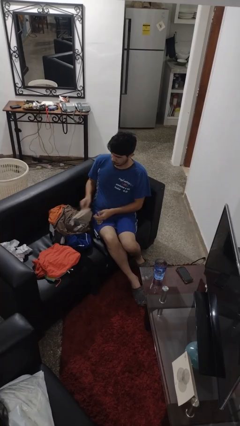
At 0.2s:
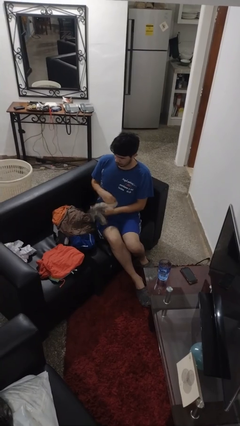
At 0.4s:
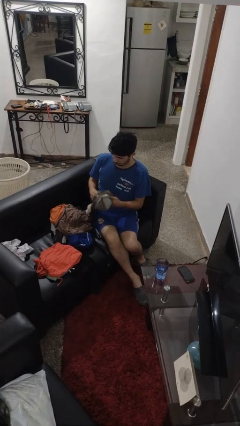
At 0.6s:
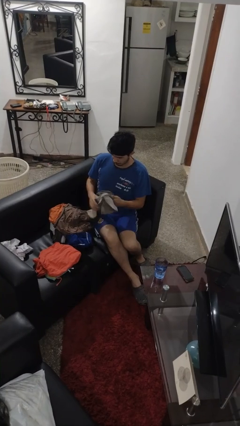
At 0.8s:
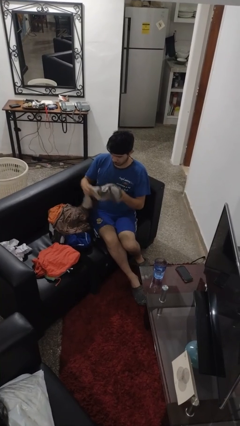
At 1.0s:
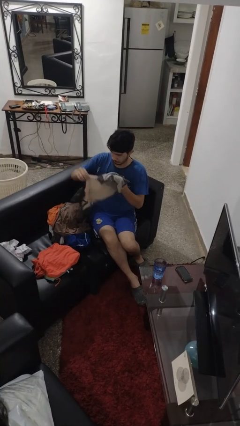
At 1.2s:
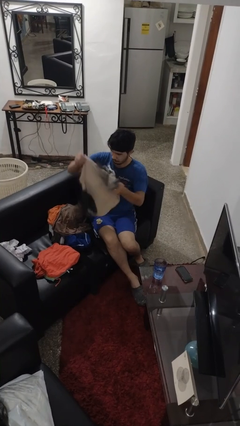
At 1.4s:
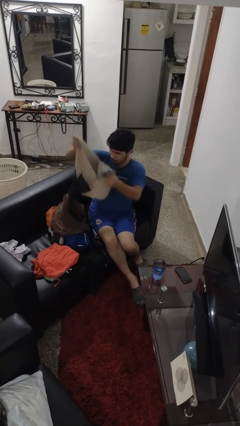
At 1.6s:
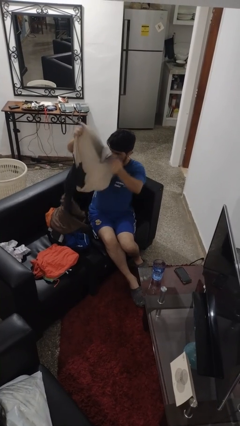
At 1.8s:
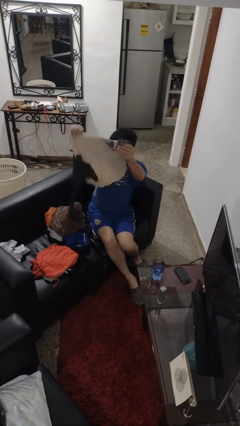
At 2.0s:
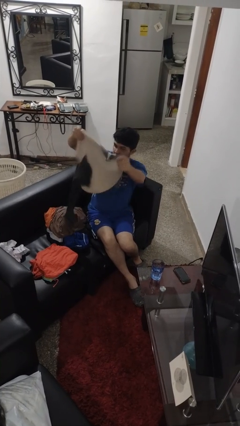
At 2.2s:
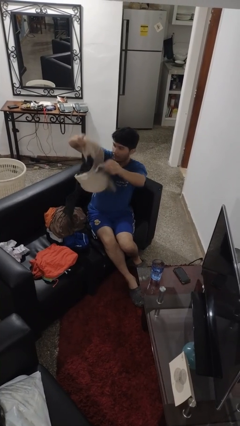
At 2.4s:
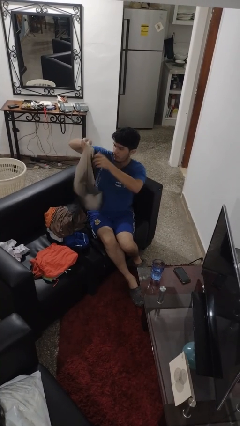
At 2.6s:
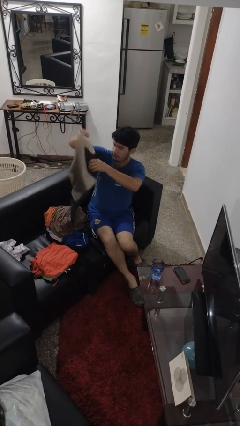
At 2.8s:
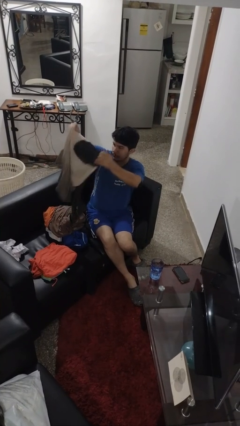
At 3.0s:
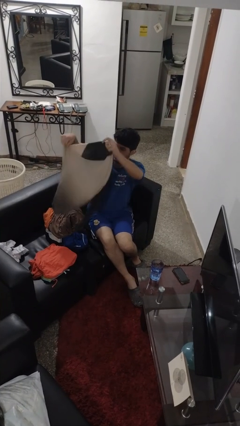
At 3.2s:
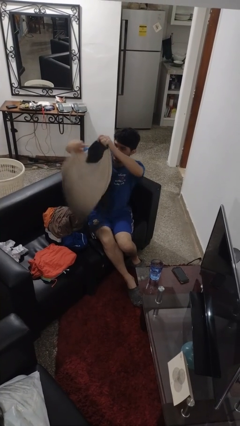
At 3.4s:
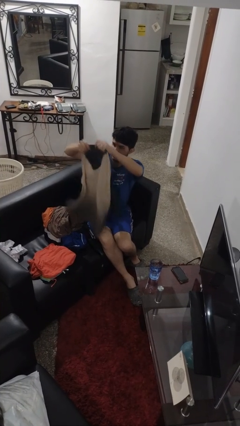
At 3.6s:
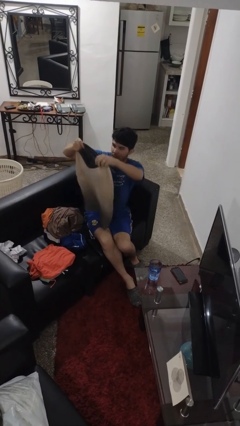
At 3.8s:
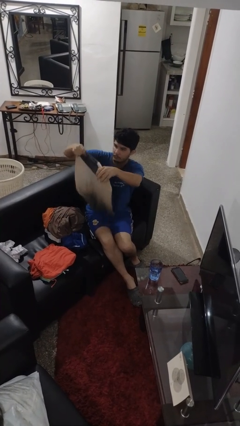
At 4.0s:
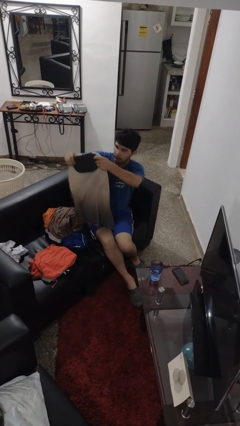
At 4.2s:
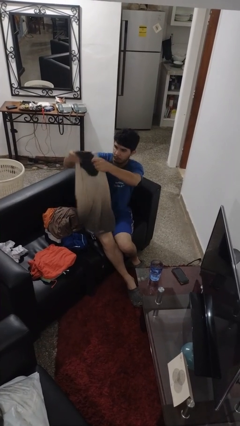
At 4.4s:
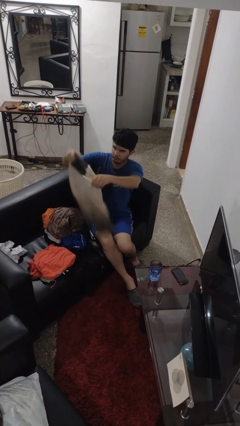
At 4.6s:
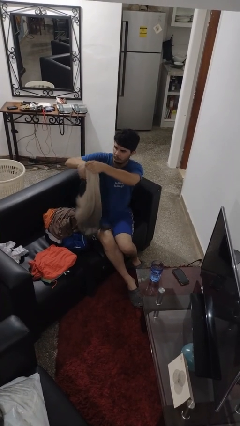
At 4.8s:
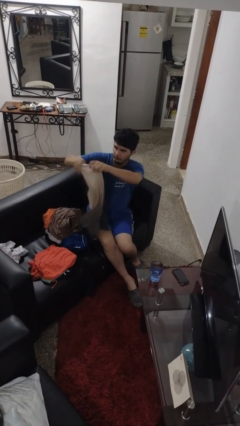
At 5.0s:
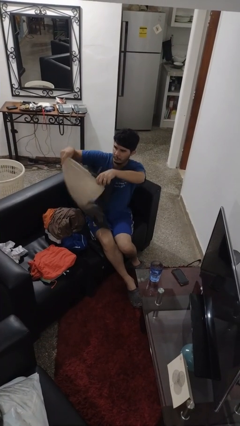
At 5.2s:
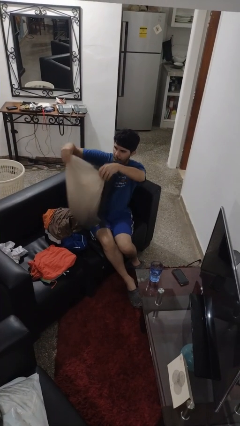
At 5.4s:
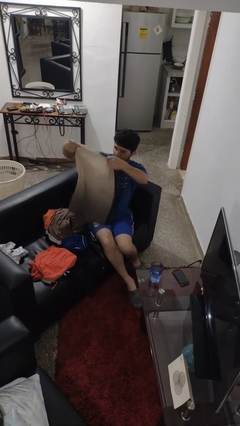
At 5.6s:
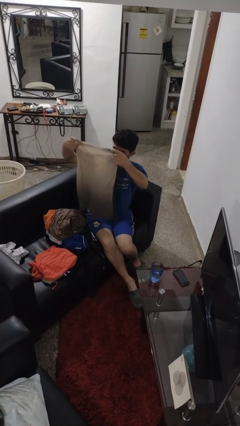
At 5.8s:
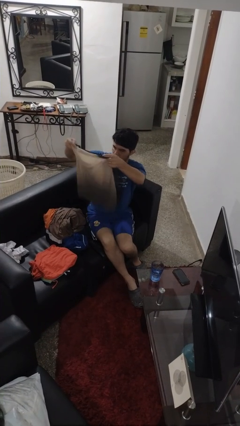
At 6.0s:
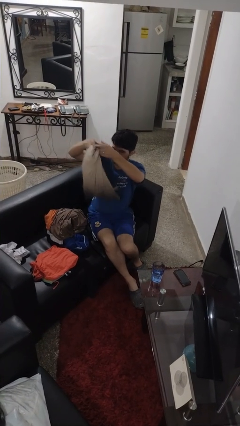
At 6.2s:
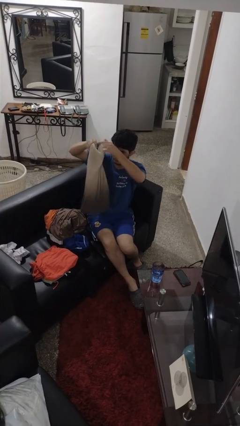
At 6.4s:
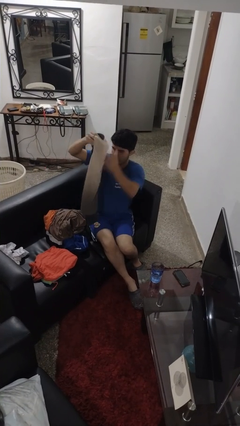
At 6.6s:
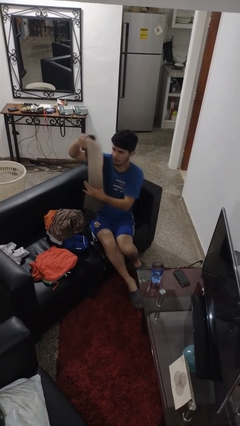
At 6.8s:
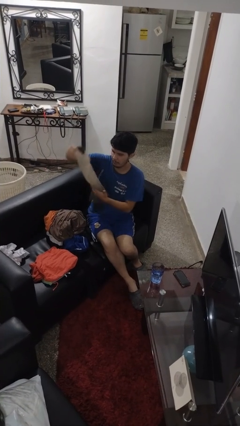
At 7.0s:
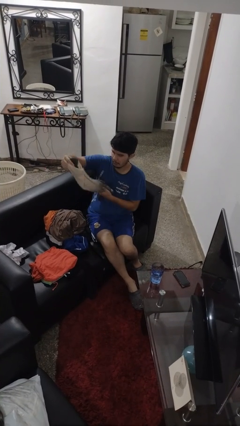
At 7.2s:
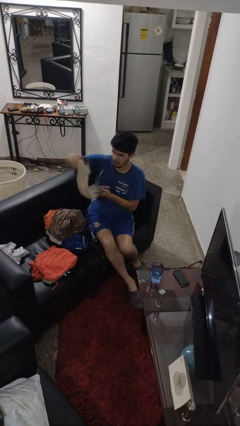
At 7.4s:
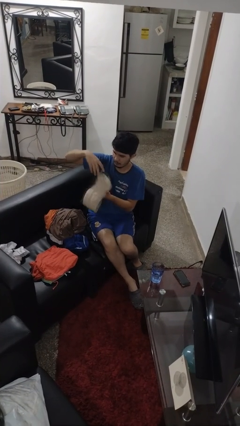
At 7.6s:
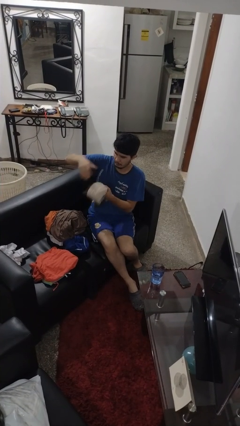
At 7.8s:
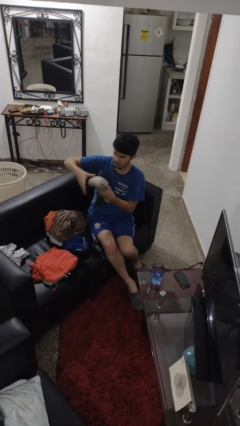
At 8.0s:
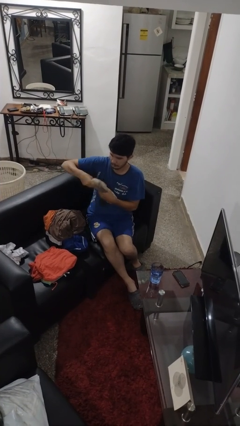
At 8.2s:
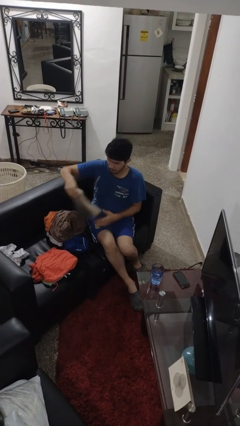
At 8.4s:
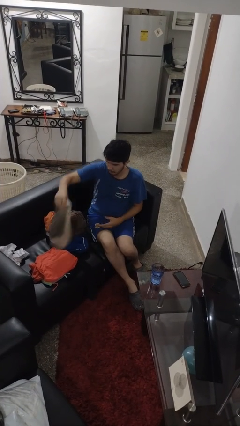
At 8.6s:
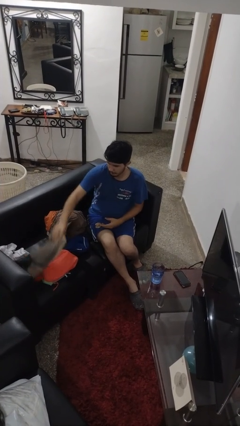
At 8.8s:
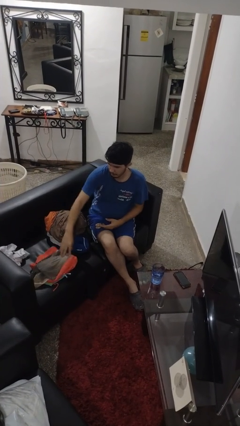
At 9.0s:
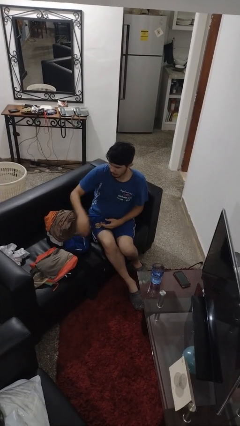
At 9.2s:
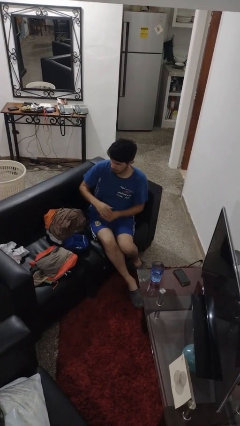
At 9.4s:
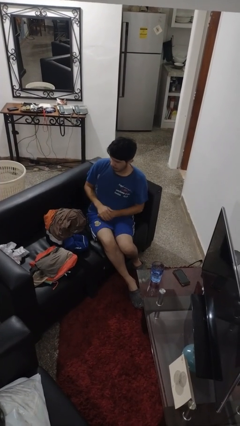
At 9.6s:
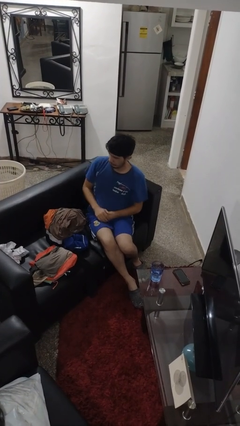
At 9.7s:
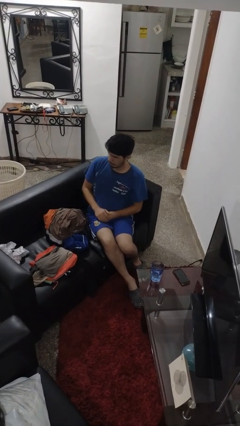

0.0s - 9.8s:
person folds shirt

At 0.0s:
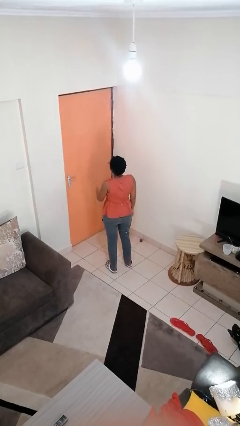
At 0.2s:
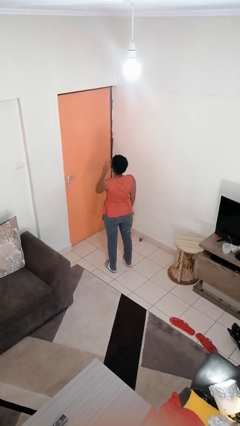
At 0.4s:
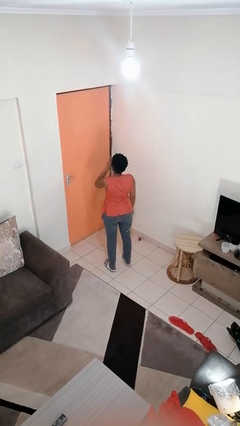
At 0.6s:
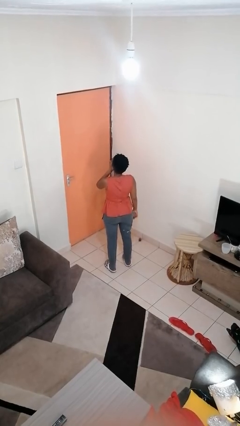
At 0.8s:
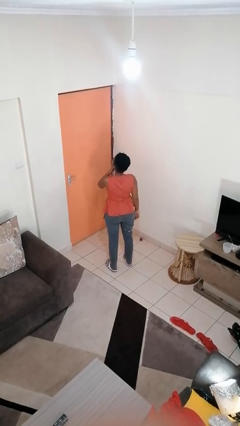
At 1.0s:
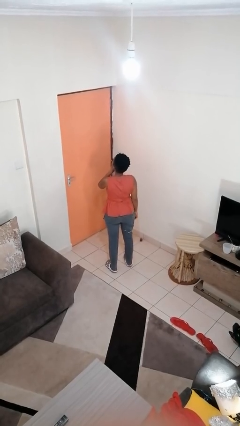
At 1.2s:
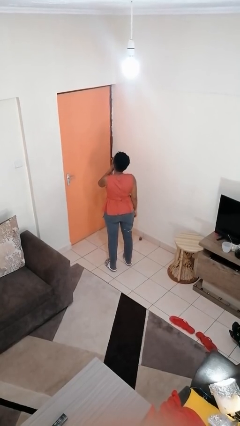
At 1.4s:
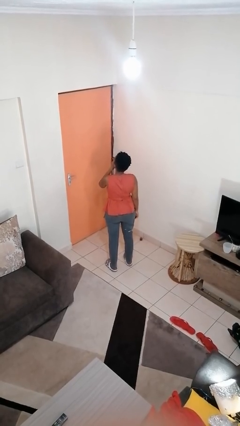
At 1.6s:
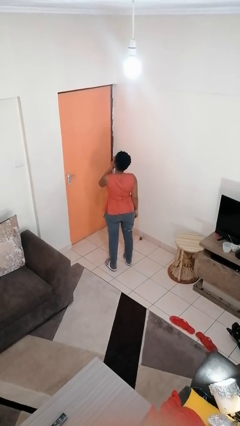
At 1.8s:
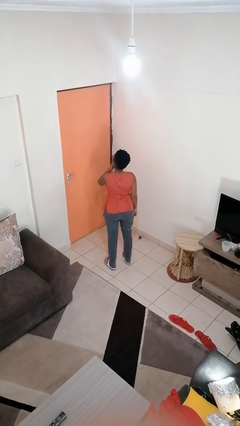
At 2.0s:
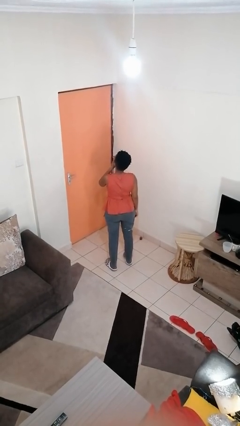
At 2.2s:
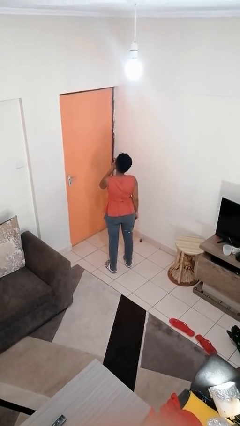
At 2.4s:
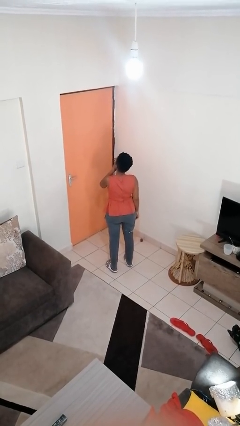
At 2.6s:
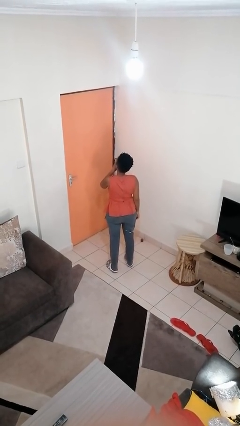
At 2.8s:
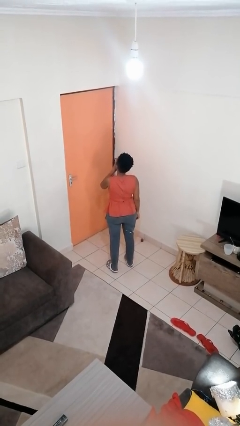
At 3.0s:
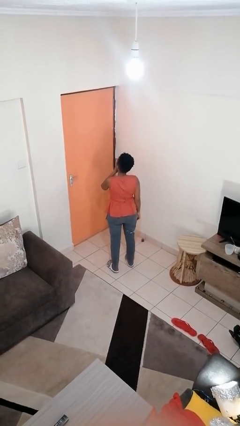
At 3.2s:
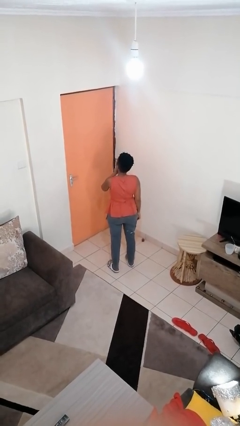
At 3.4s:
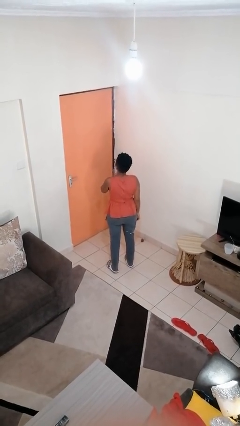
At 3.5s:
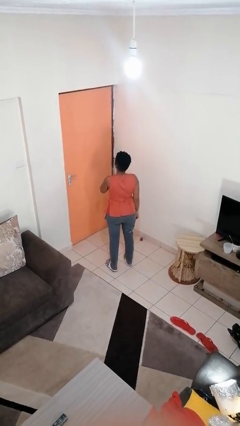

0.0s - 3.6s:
person gestures be quiet

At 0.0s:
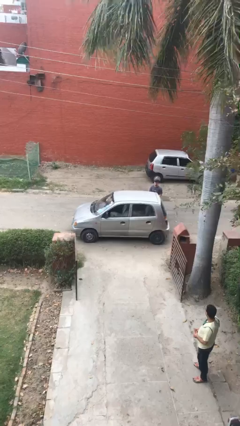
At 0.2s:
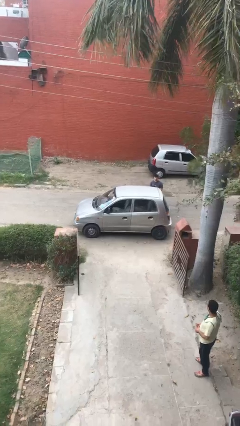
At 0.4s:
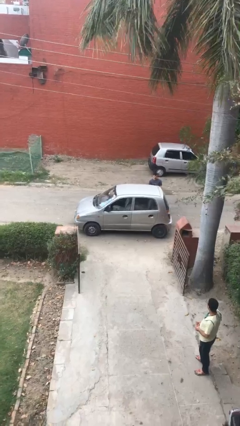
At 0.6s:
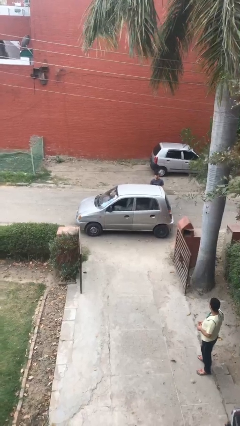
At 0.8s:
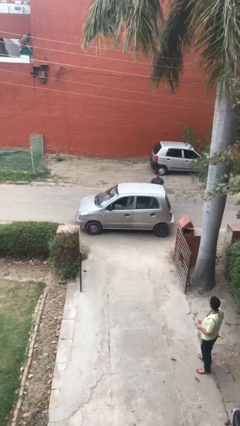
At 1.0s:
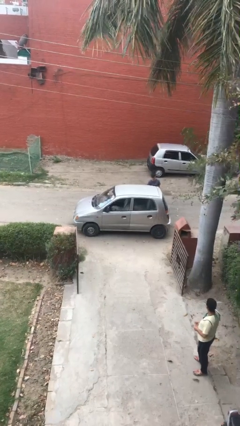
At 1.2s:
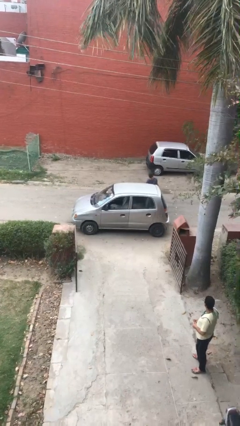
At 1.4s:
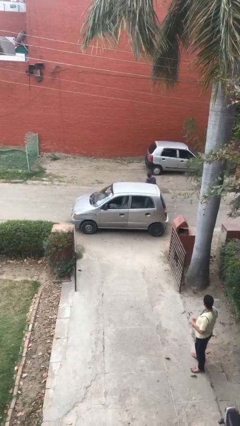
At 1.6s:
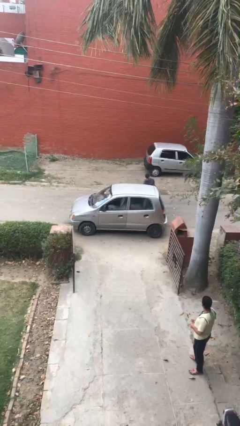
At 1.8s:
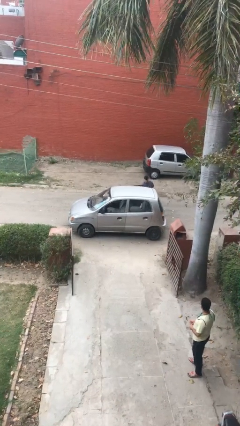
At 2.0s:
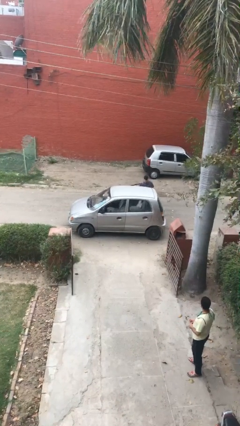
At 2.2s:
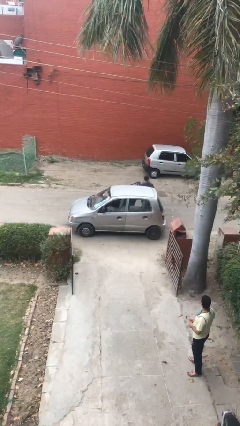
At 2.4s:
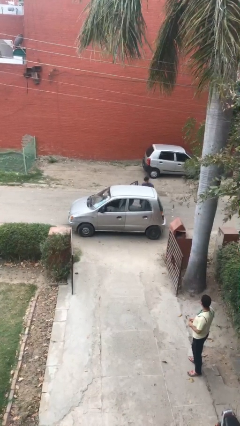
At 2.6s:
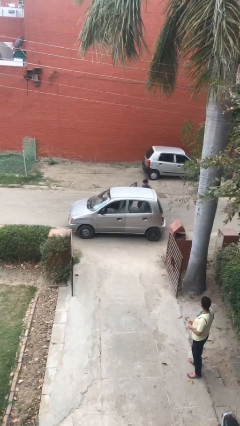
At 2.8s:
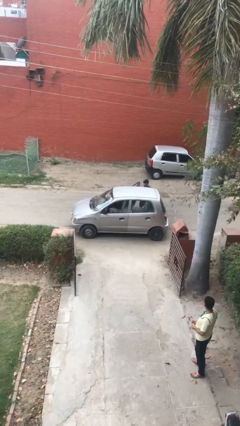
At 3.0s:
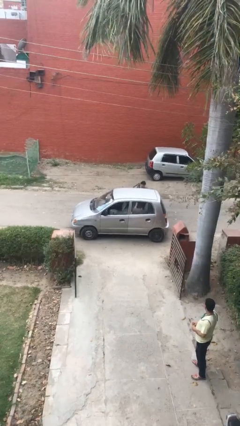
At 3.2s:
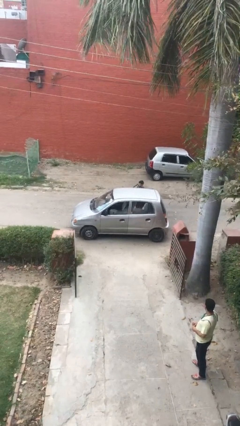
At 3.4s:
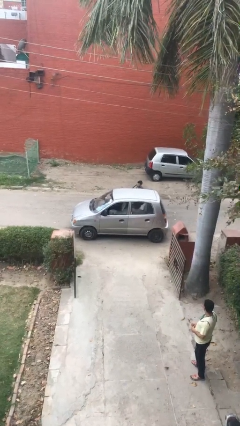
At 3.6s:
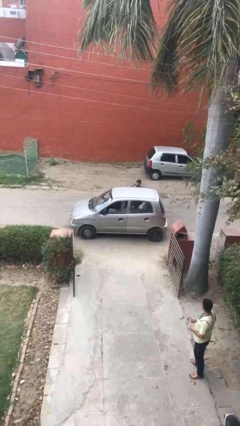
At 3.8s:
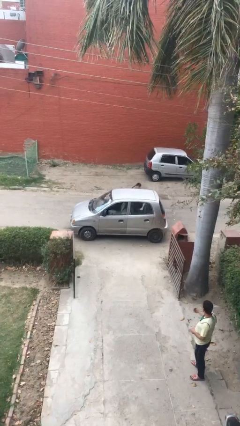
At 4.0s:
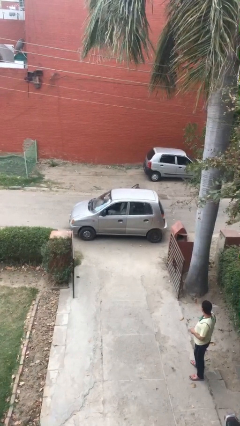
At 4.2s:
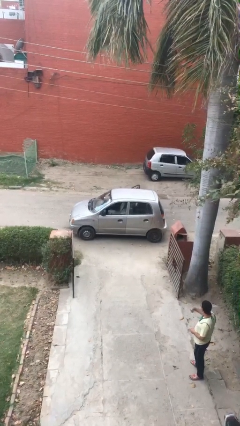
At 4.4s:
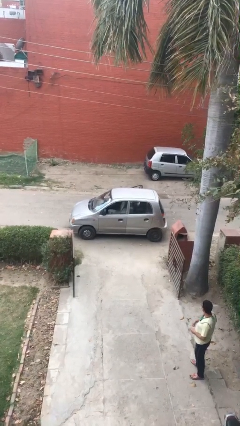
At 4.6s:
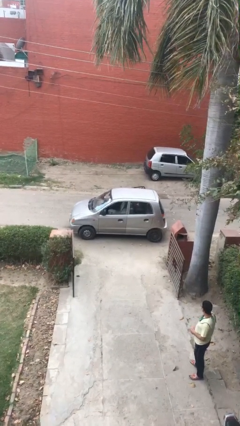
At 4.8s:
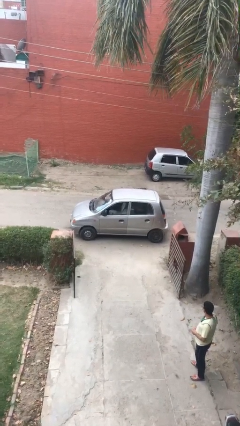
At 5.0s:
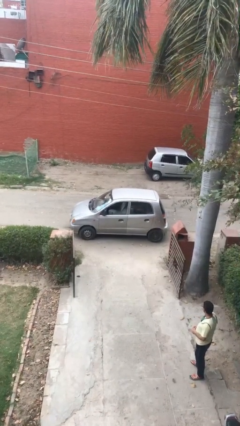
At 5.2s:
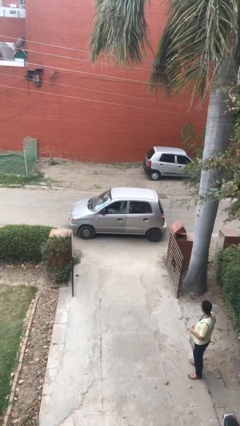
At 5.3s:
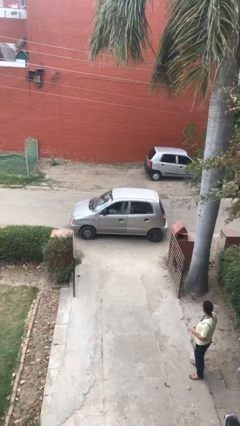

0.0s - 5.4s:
car picks up person
